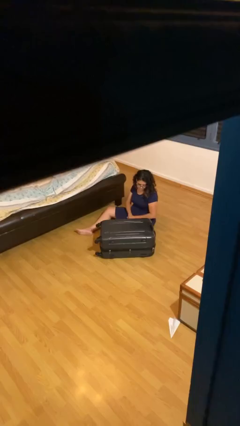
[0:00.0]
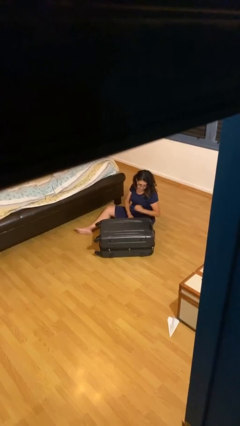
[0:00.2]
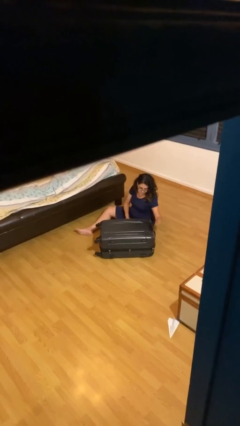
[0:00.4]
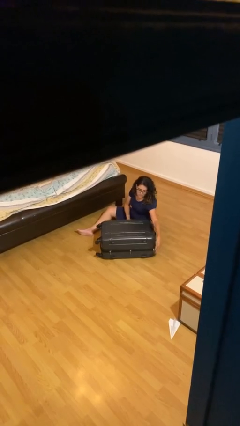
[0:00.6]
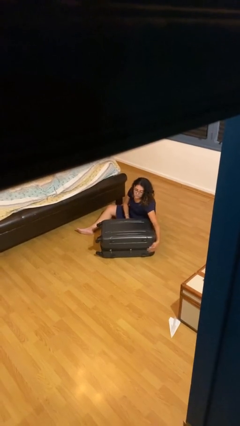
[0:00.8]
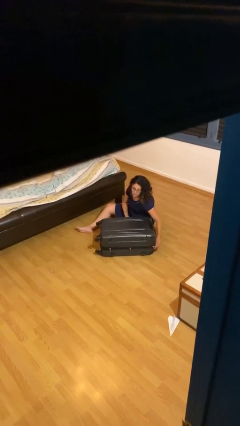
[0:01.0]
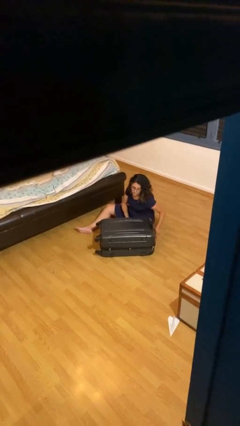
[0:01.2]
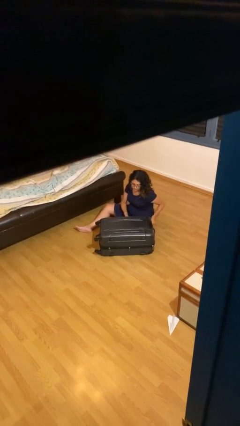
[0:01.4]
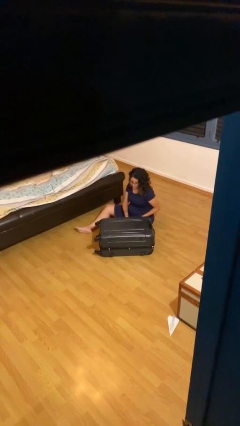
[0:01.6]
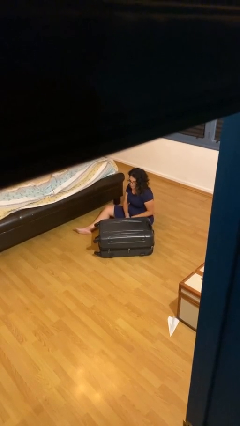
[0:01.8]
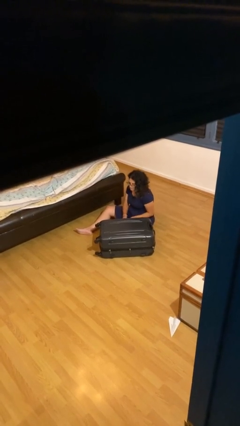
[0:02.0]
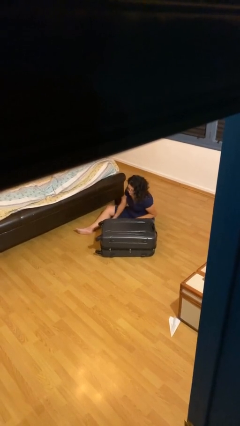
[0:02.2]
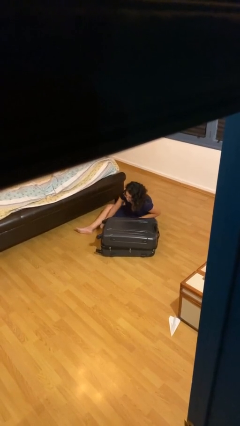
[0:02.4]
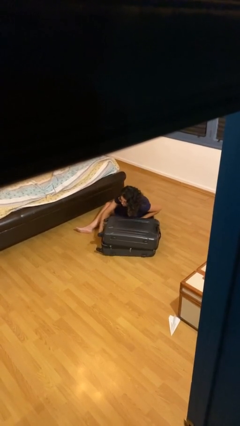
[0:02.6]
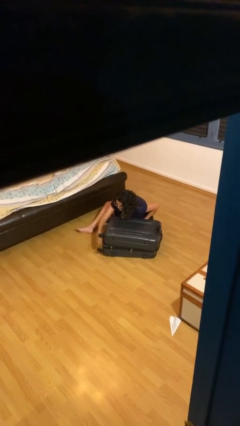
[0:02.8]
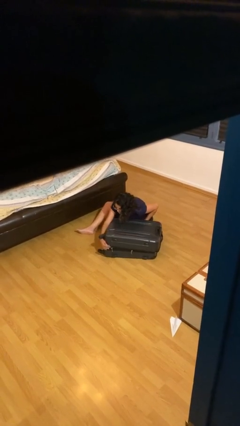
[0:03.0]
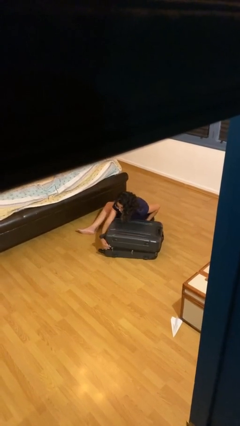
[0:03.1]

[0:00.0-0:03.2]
person opens suitcase

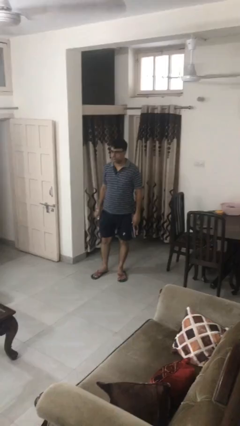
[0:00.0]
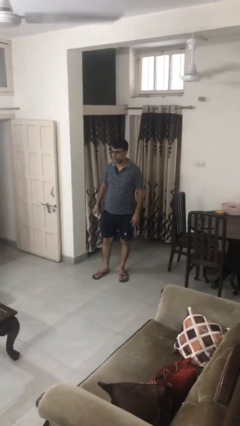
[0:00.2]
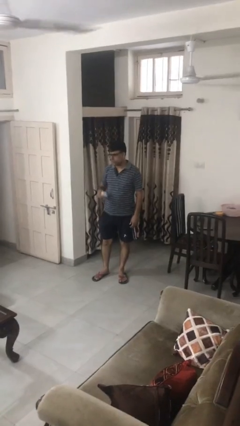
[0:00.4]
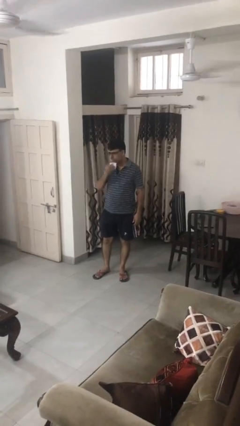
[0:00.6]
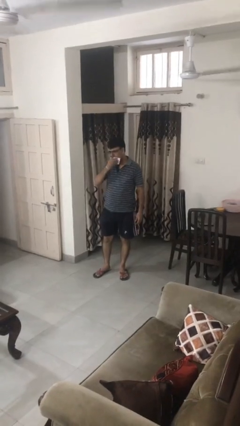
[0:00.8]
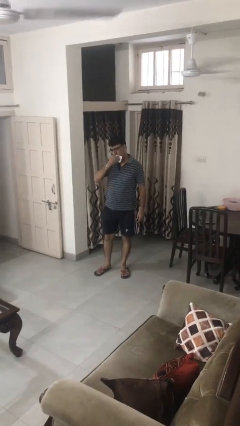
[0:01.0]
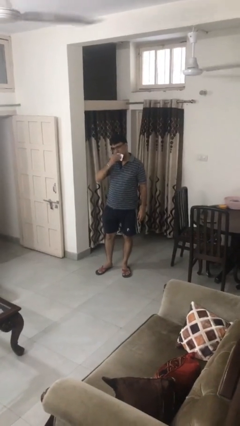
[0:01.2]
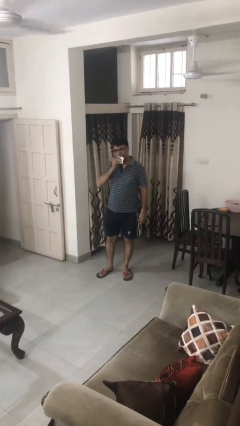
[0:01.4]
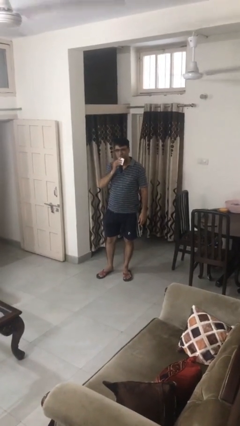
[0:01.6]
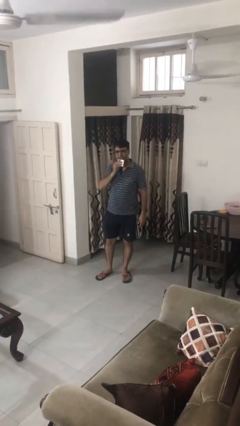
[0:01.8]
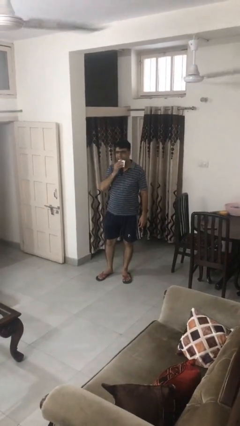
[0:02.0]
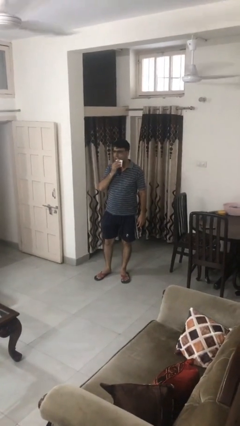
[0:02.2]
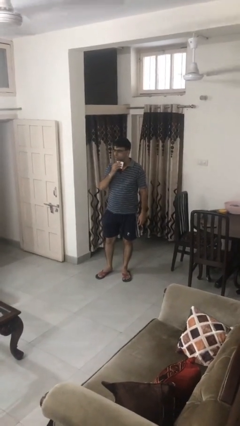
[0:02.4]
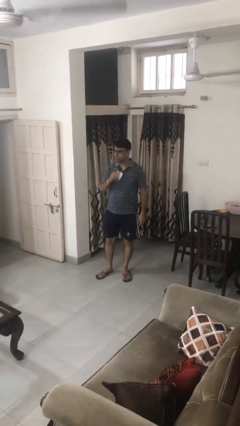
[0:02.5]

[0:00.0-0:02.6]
person wipes mouth with napkin

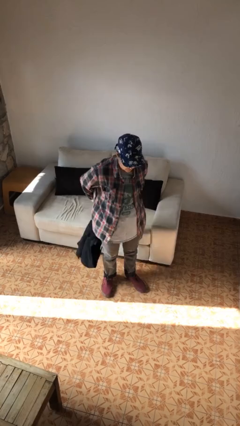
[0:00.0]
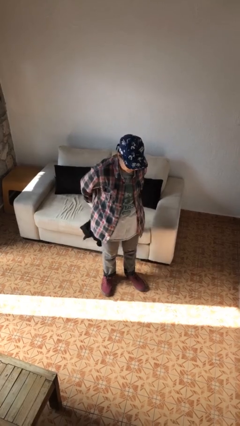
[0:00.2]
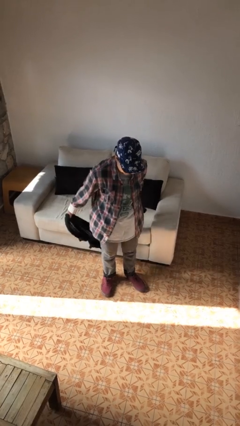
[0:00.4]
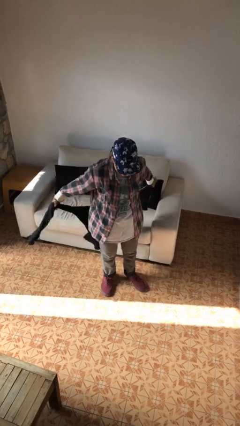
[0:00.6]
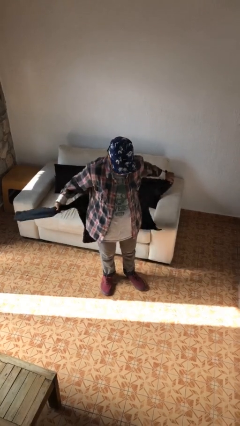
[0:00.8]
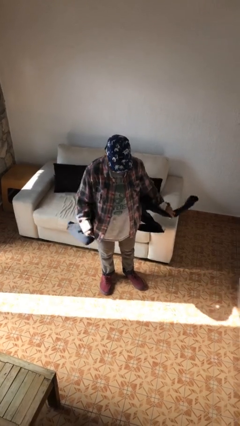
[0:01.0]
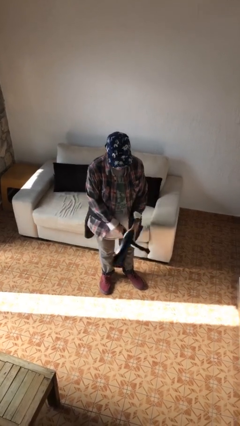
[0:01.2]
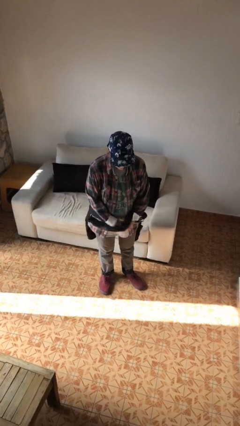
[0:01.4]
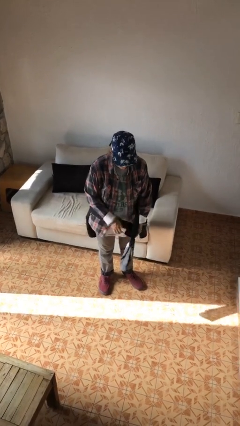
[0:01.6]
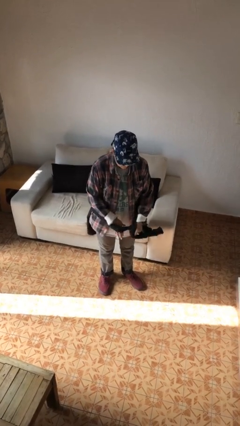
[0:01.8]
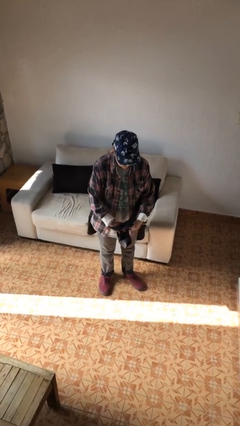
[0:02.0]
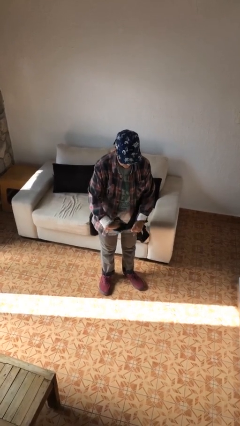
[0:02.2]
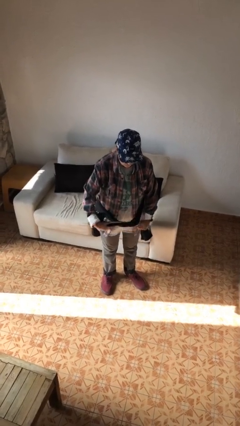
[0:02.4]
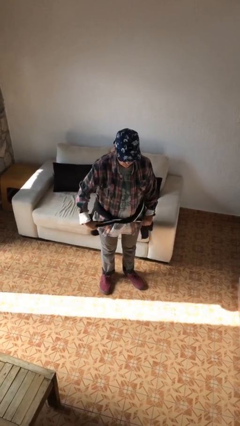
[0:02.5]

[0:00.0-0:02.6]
person ties jacket around waist

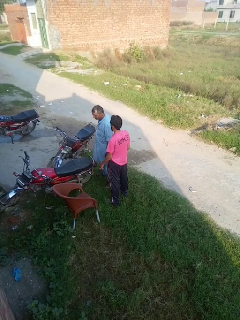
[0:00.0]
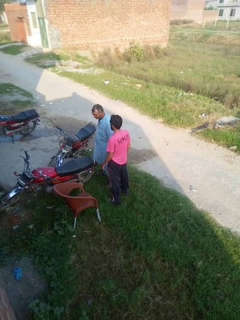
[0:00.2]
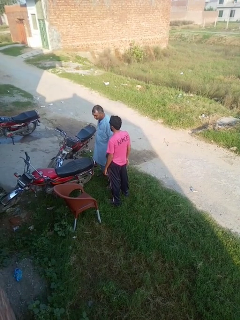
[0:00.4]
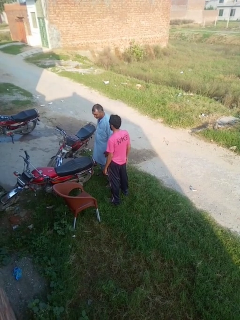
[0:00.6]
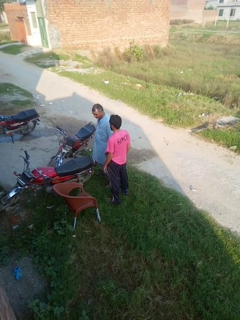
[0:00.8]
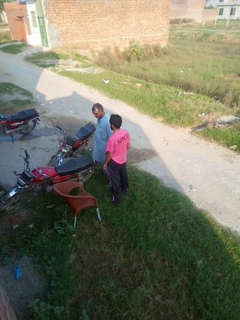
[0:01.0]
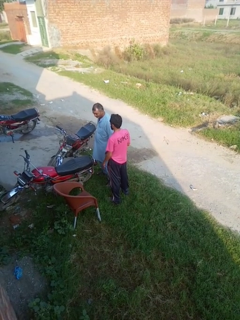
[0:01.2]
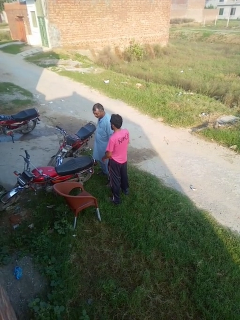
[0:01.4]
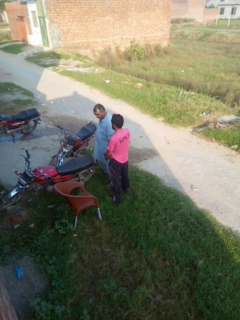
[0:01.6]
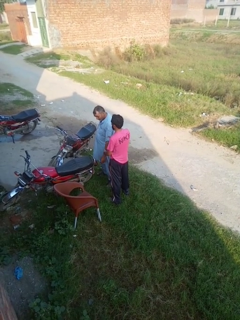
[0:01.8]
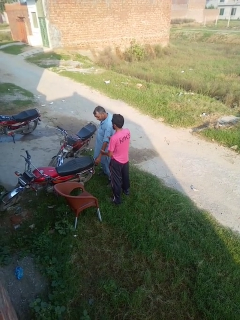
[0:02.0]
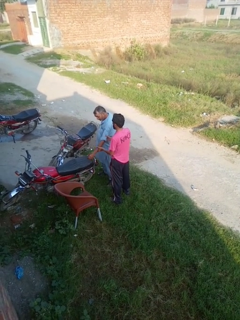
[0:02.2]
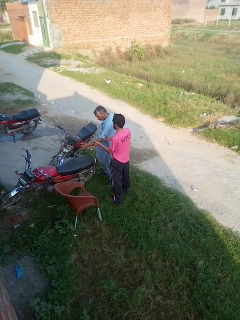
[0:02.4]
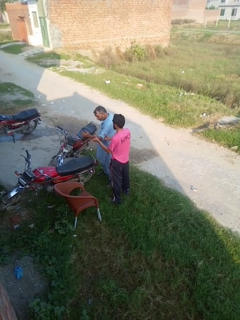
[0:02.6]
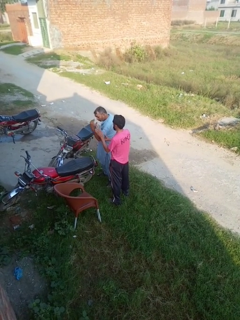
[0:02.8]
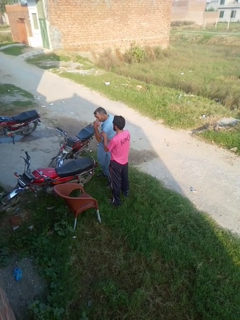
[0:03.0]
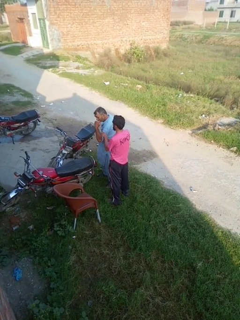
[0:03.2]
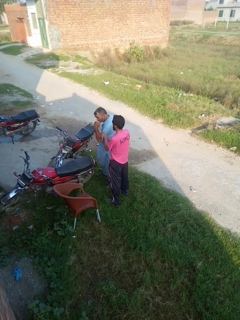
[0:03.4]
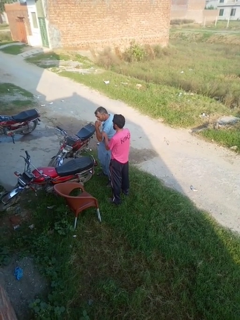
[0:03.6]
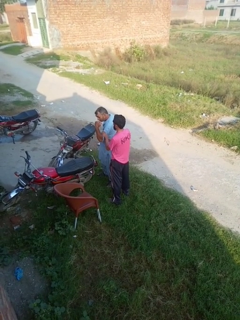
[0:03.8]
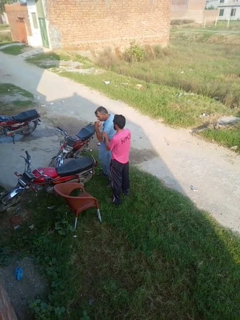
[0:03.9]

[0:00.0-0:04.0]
person grabs person by bicep

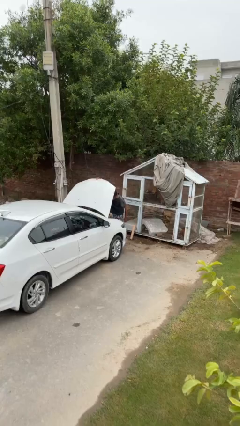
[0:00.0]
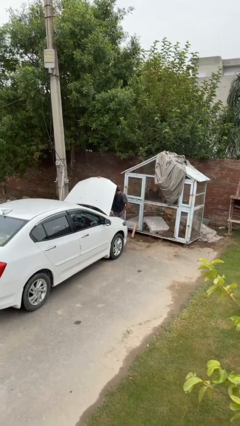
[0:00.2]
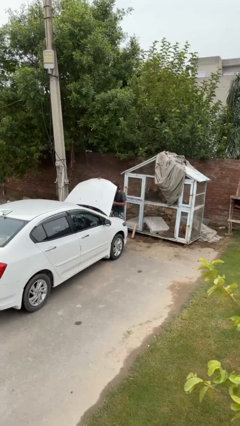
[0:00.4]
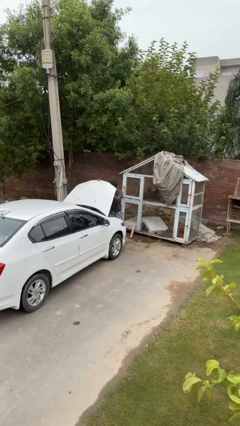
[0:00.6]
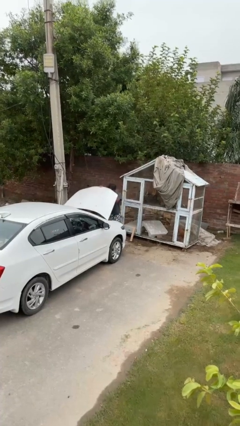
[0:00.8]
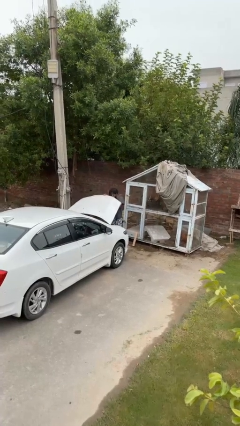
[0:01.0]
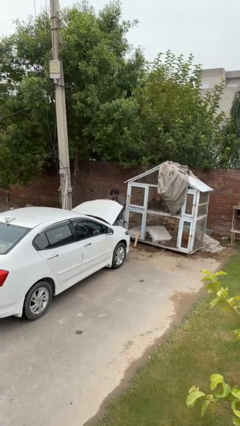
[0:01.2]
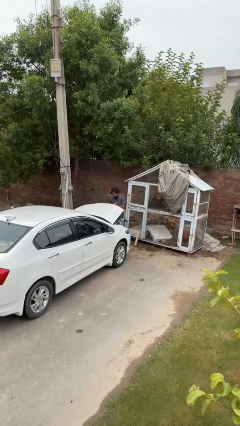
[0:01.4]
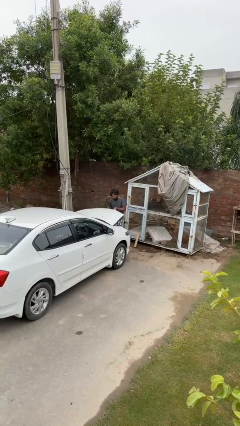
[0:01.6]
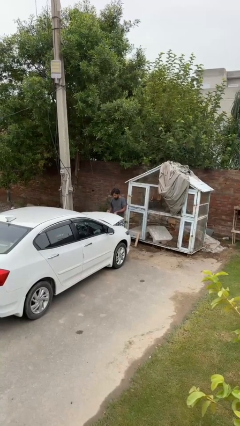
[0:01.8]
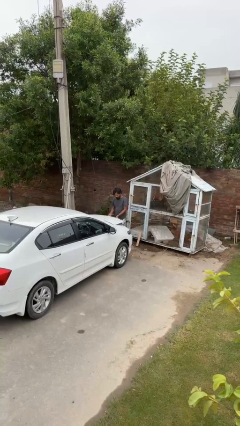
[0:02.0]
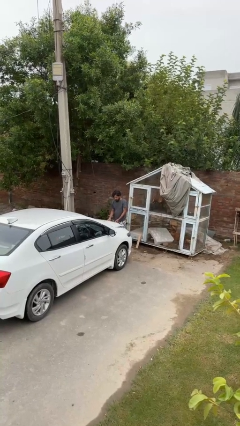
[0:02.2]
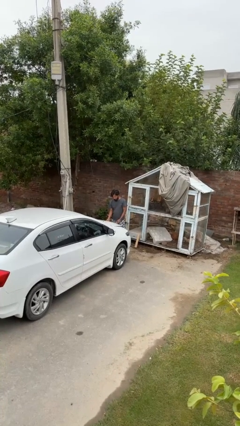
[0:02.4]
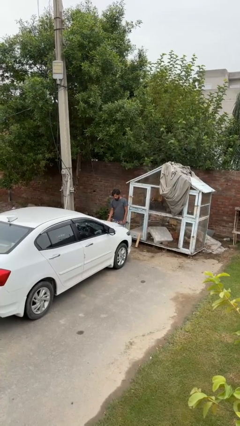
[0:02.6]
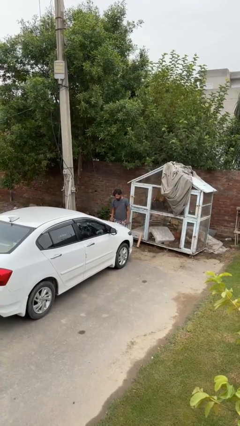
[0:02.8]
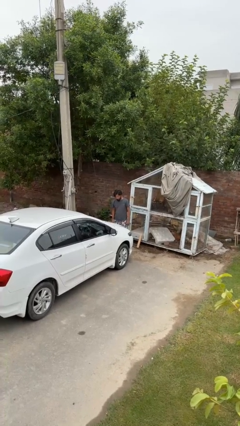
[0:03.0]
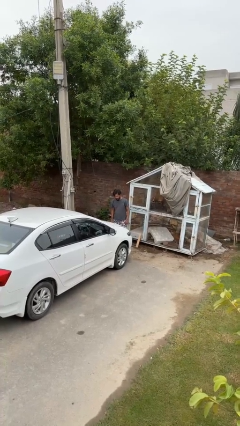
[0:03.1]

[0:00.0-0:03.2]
person closes car hood

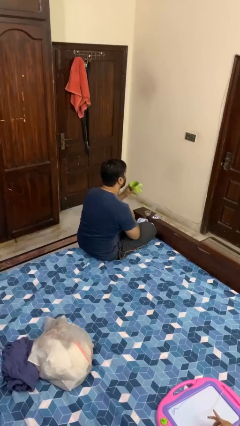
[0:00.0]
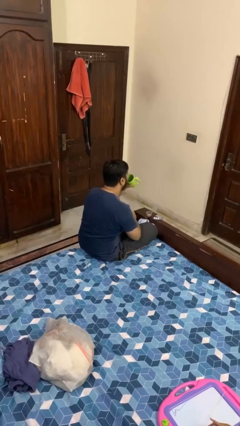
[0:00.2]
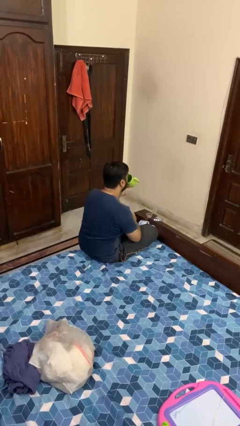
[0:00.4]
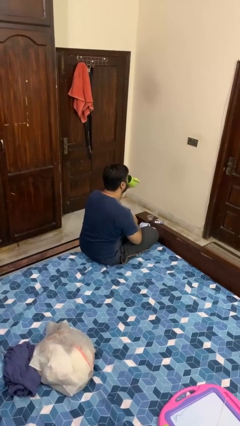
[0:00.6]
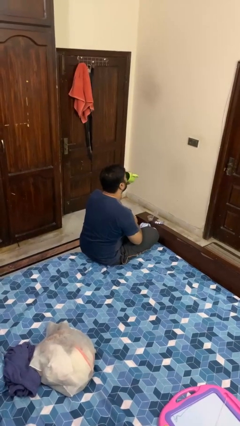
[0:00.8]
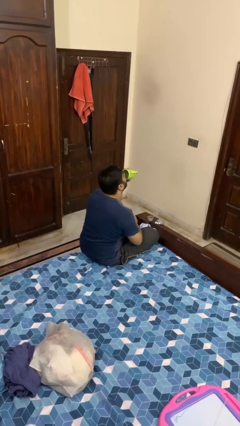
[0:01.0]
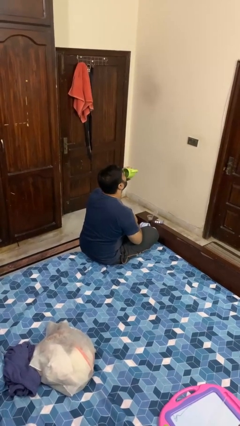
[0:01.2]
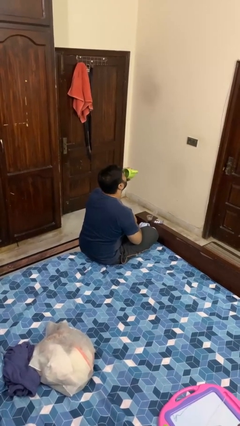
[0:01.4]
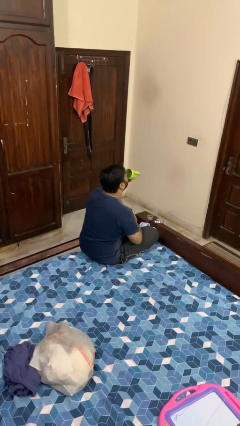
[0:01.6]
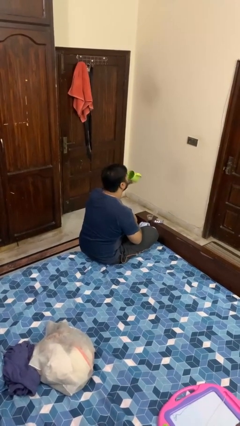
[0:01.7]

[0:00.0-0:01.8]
person drinks from cup

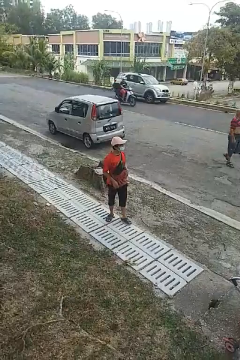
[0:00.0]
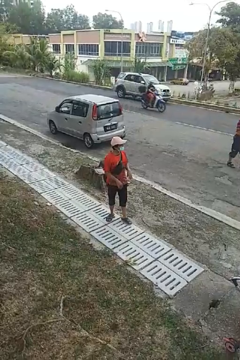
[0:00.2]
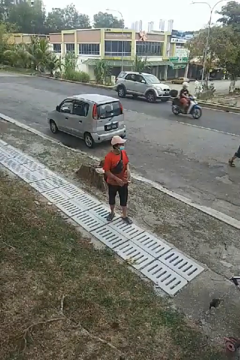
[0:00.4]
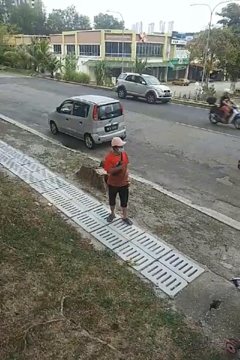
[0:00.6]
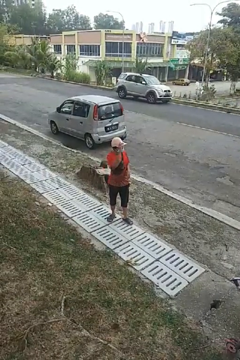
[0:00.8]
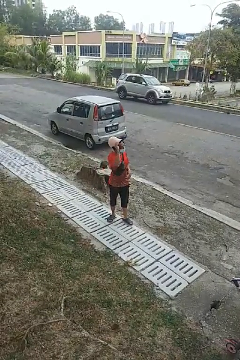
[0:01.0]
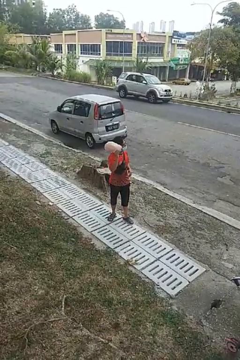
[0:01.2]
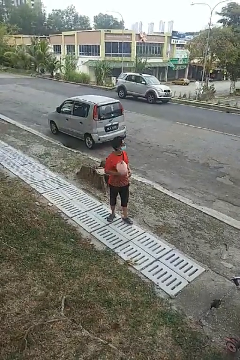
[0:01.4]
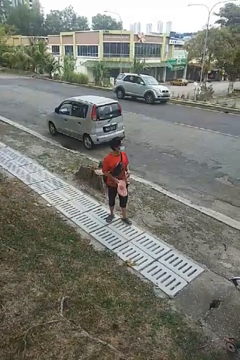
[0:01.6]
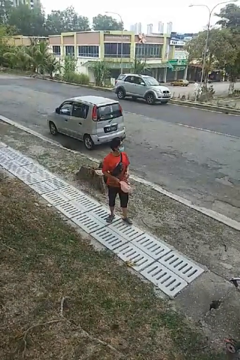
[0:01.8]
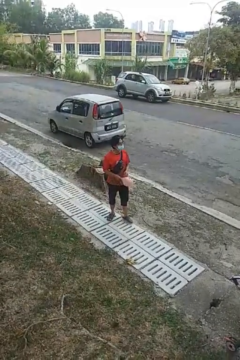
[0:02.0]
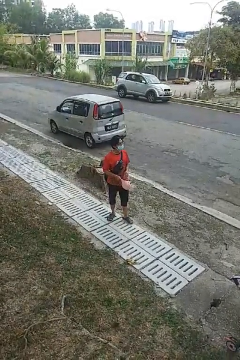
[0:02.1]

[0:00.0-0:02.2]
person takes off hat
